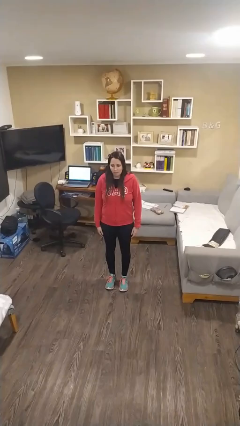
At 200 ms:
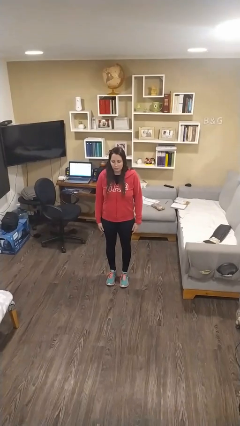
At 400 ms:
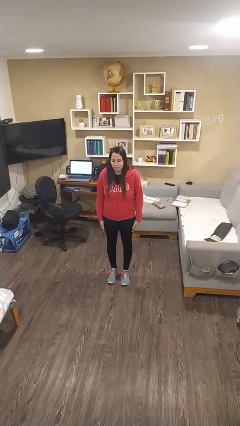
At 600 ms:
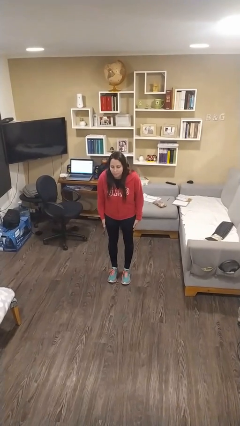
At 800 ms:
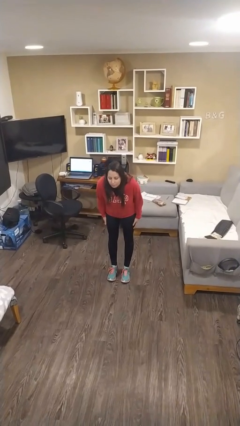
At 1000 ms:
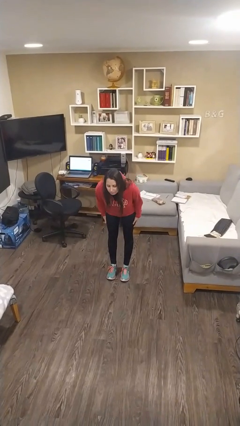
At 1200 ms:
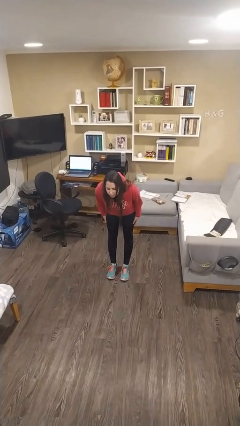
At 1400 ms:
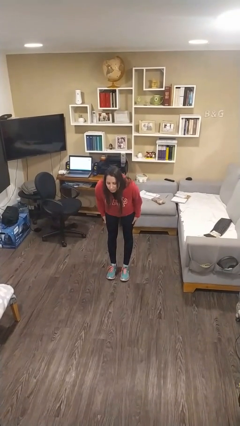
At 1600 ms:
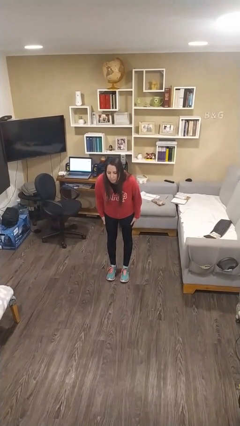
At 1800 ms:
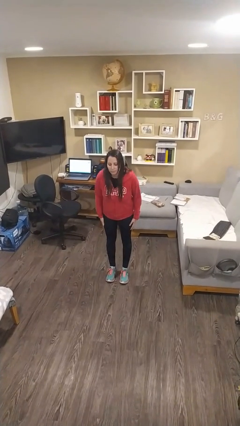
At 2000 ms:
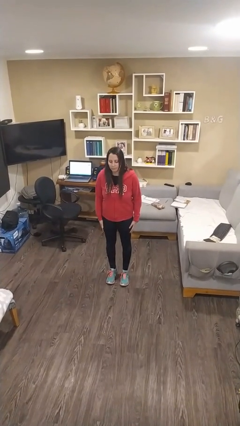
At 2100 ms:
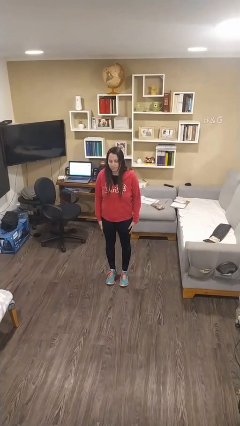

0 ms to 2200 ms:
person bows

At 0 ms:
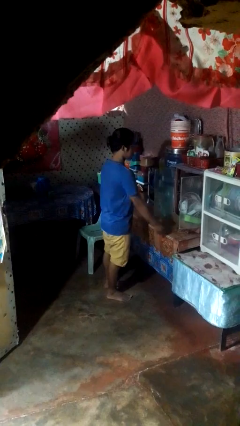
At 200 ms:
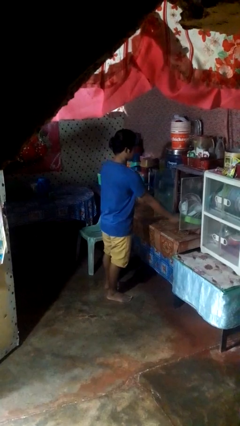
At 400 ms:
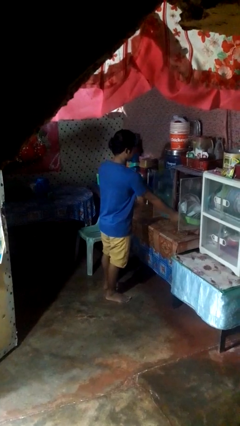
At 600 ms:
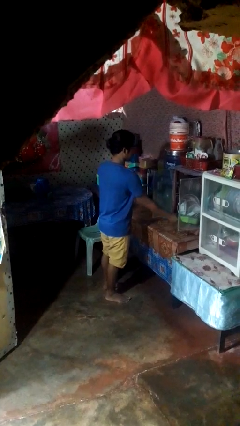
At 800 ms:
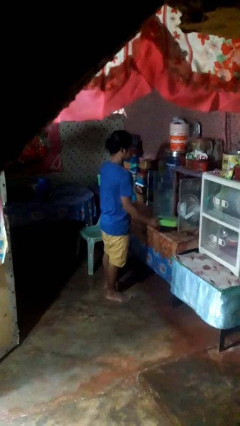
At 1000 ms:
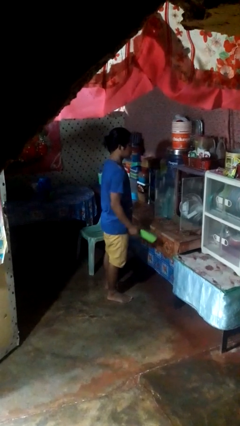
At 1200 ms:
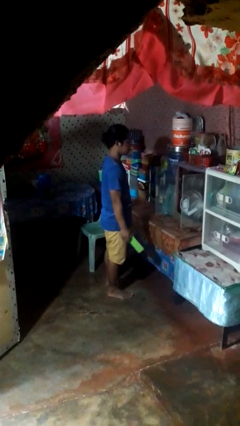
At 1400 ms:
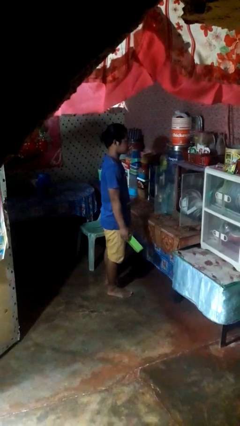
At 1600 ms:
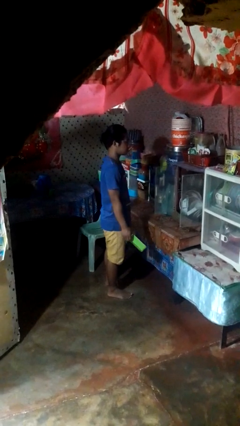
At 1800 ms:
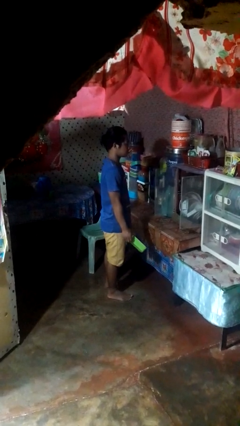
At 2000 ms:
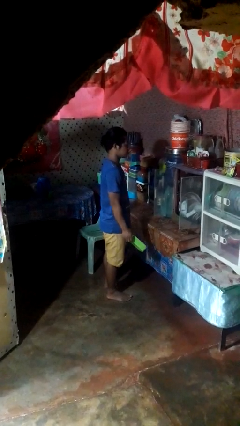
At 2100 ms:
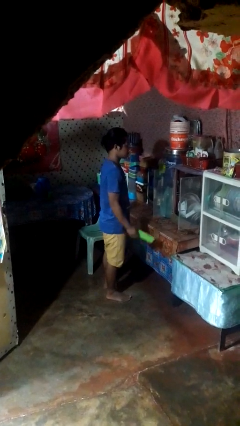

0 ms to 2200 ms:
person picks up object from cabinet

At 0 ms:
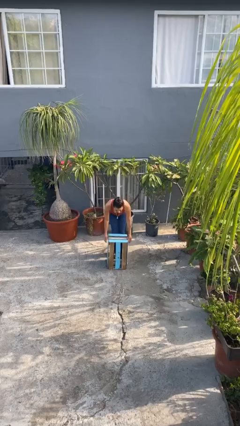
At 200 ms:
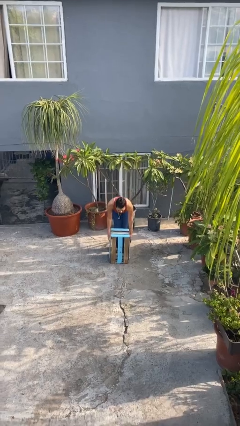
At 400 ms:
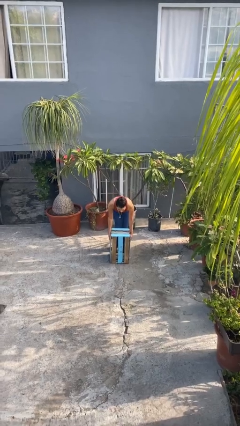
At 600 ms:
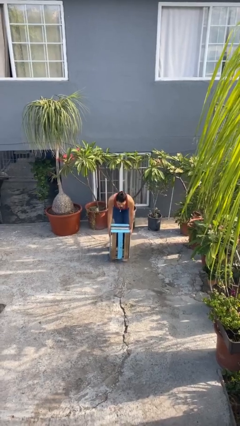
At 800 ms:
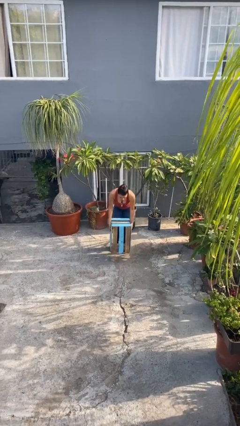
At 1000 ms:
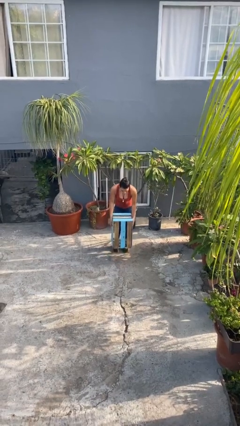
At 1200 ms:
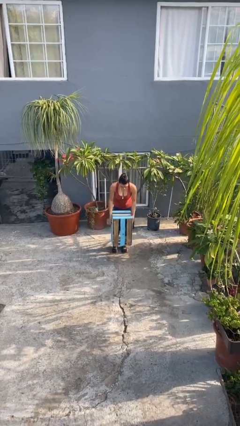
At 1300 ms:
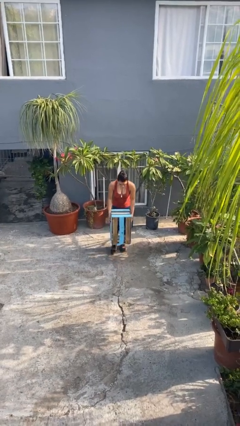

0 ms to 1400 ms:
person picks up object from floor

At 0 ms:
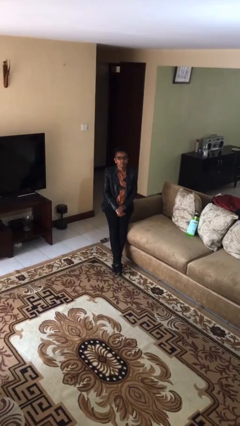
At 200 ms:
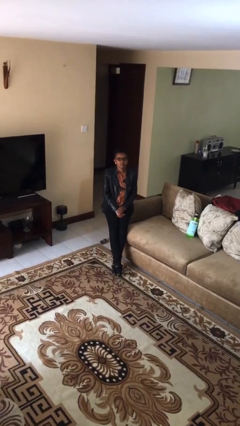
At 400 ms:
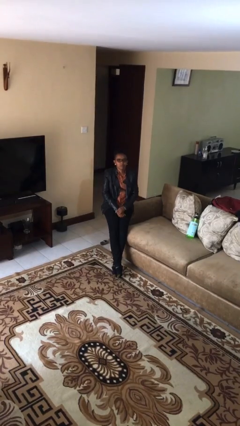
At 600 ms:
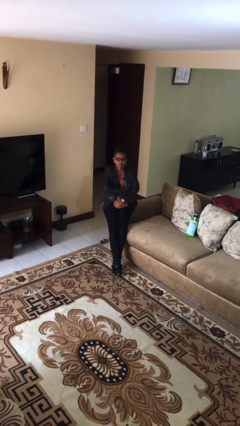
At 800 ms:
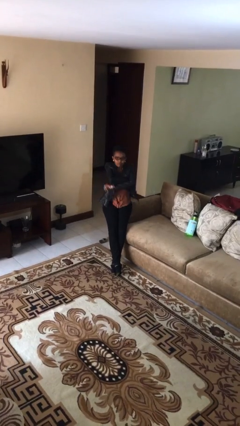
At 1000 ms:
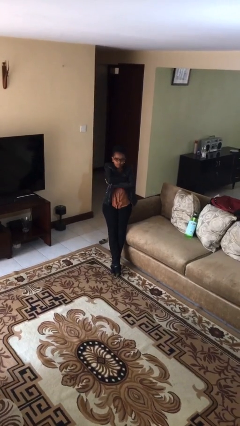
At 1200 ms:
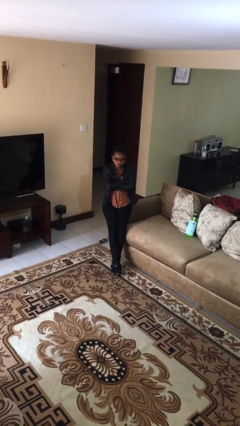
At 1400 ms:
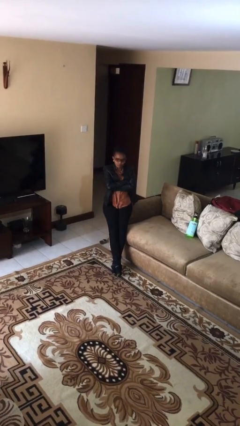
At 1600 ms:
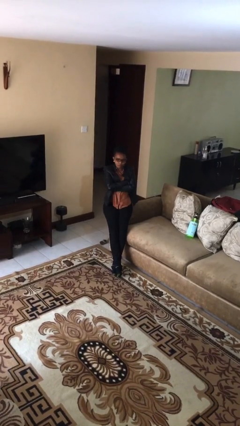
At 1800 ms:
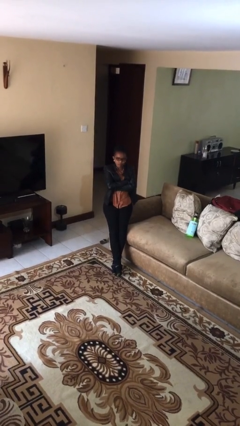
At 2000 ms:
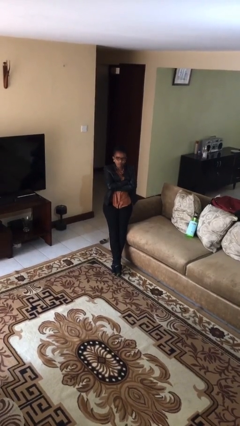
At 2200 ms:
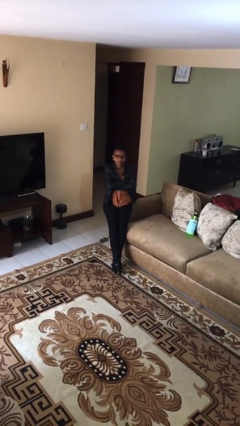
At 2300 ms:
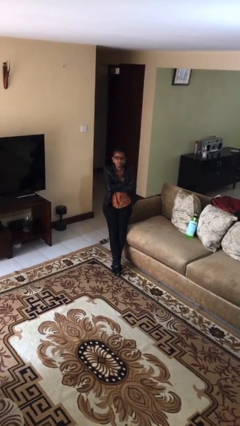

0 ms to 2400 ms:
person crosses arms

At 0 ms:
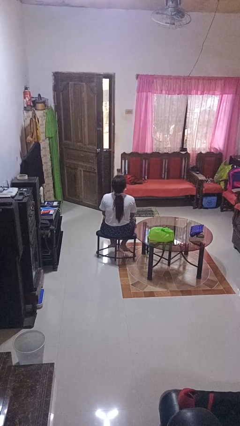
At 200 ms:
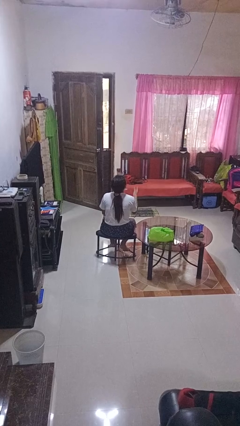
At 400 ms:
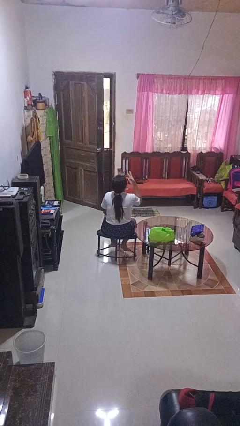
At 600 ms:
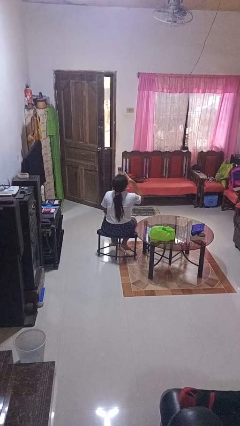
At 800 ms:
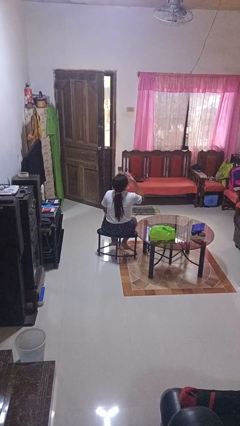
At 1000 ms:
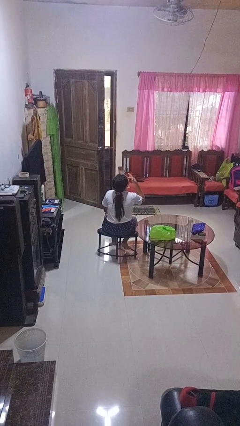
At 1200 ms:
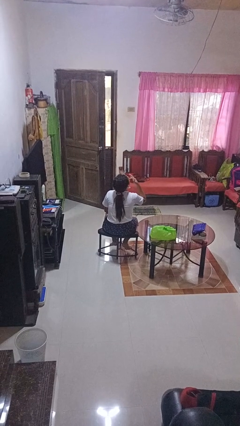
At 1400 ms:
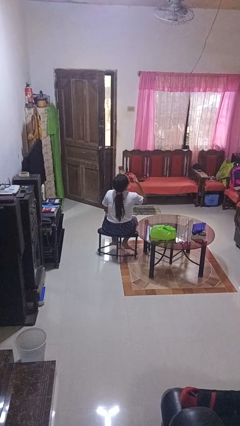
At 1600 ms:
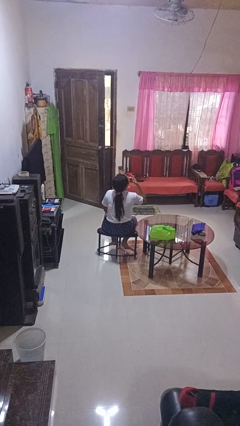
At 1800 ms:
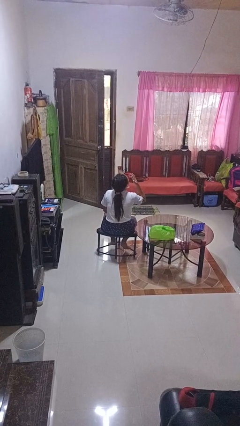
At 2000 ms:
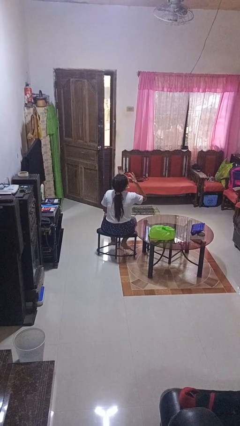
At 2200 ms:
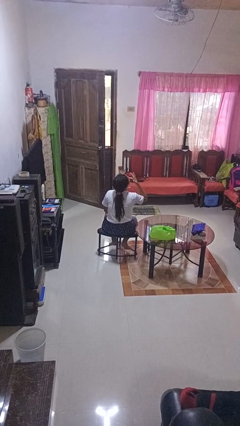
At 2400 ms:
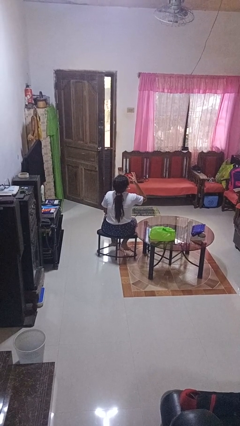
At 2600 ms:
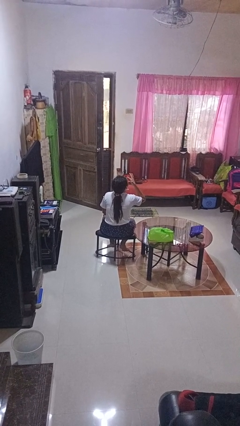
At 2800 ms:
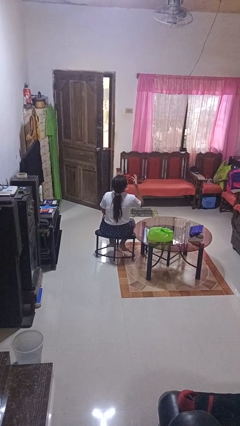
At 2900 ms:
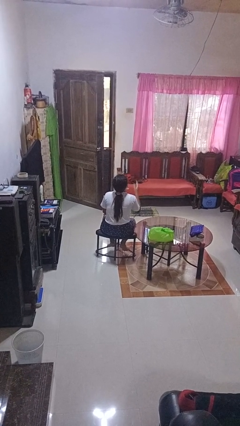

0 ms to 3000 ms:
person licks fingers

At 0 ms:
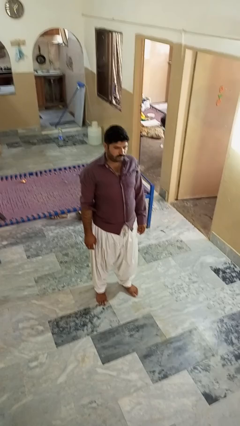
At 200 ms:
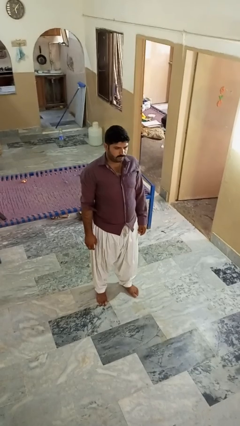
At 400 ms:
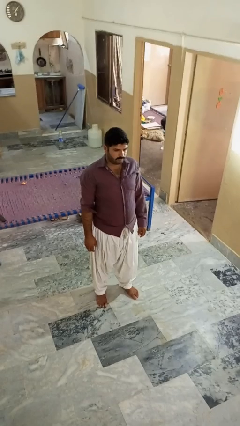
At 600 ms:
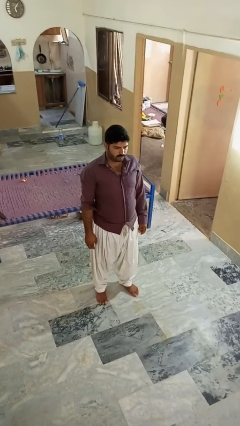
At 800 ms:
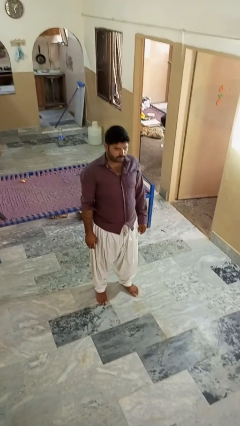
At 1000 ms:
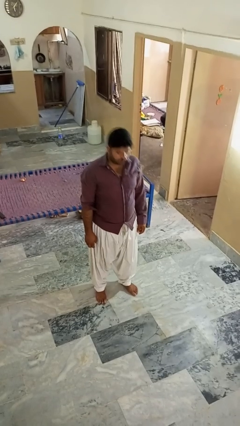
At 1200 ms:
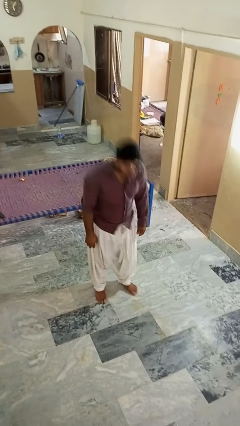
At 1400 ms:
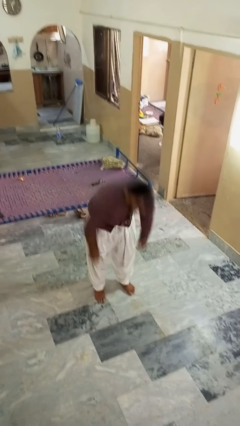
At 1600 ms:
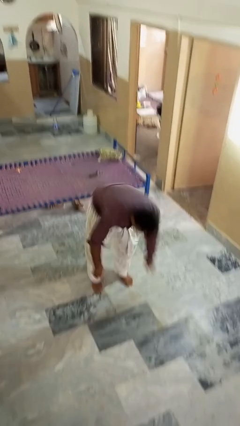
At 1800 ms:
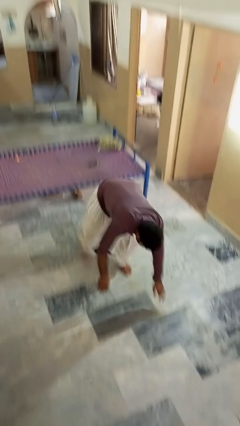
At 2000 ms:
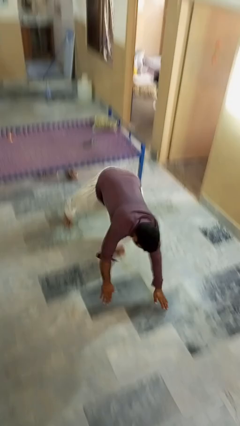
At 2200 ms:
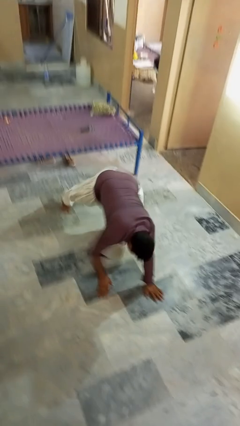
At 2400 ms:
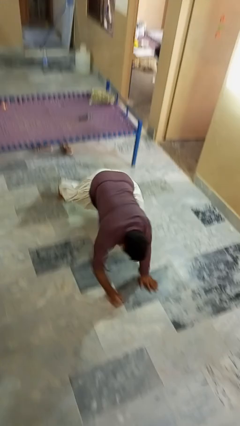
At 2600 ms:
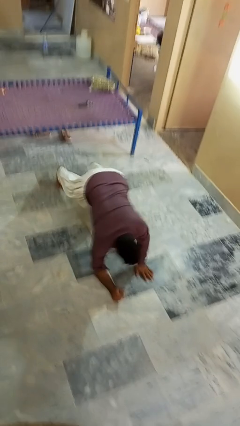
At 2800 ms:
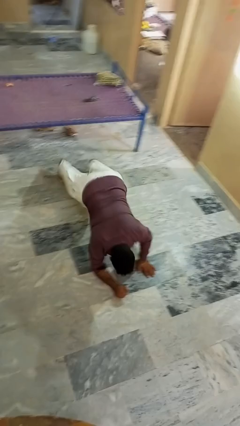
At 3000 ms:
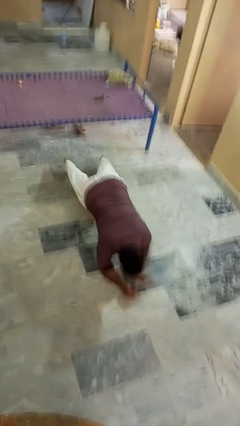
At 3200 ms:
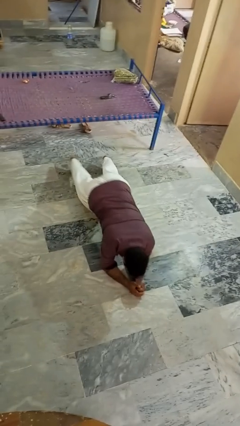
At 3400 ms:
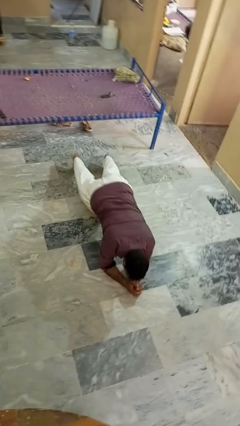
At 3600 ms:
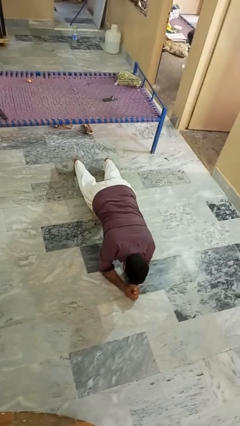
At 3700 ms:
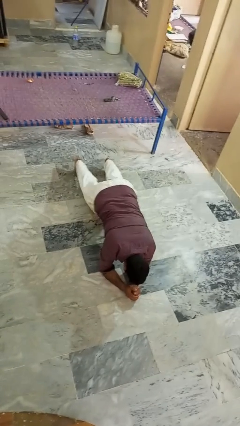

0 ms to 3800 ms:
person exercises with plank

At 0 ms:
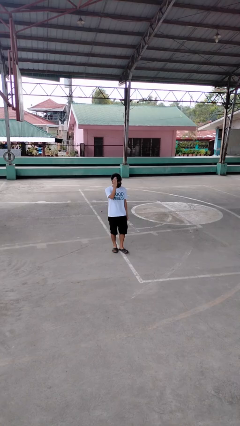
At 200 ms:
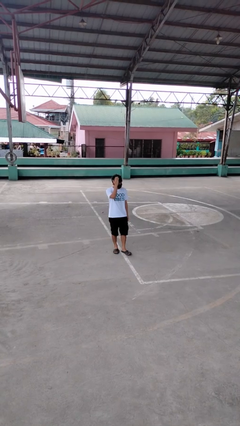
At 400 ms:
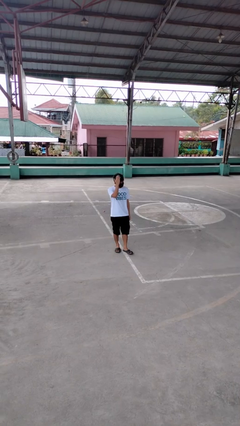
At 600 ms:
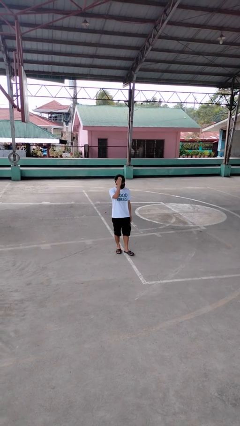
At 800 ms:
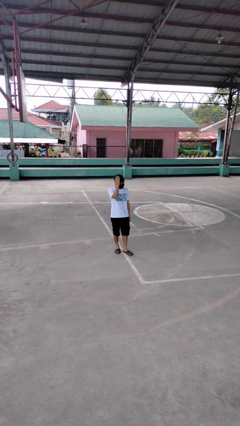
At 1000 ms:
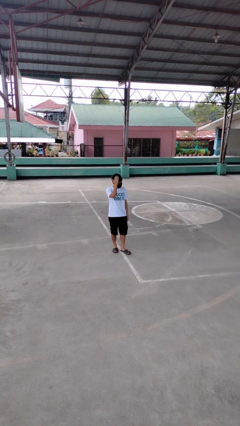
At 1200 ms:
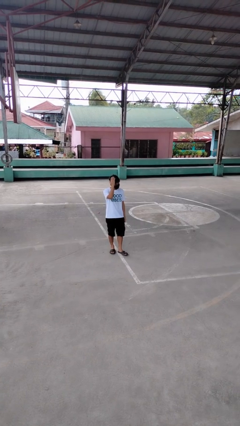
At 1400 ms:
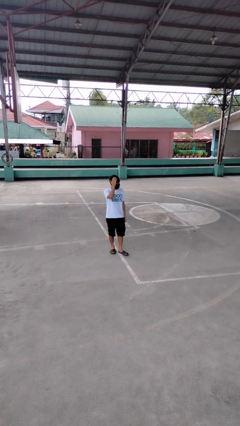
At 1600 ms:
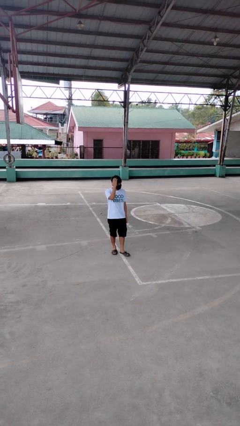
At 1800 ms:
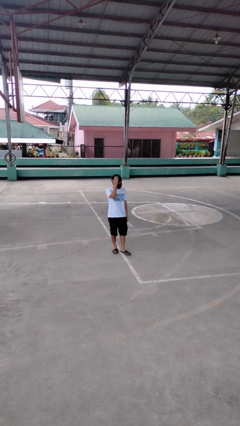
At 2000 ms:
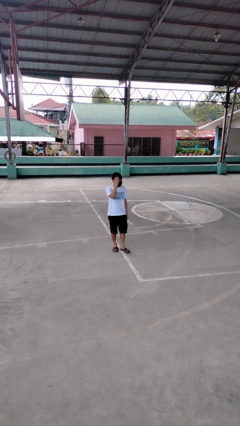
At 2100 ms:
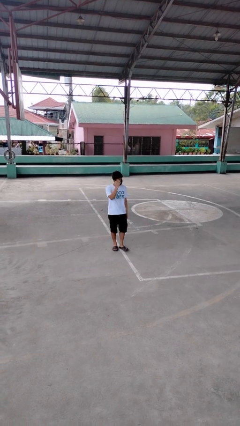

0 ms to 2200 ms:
person pats head
